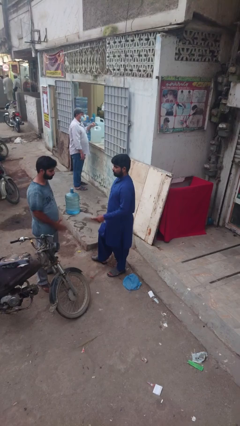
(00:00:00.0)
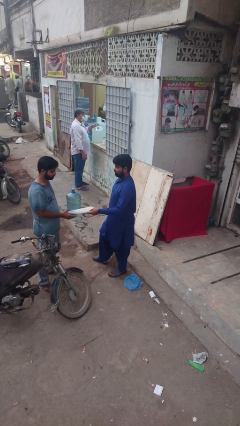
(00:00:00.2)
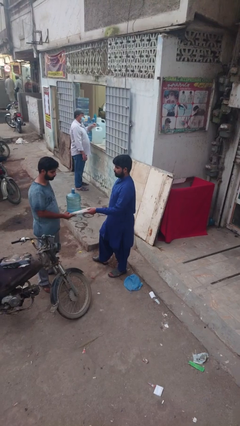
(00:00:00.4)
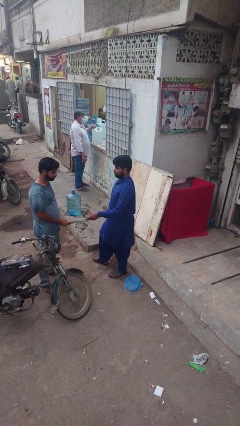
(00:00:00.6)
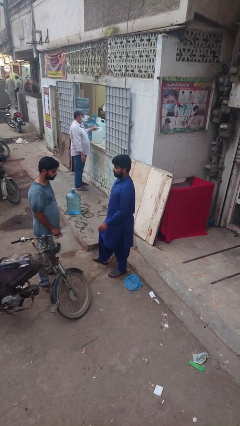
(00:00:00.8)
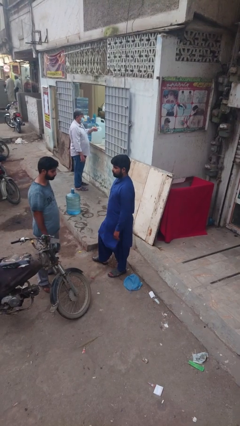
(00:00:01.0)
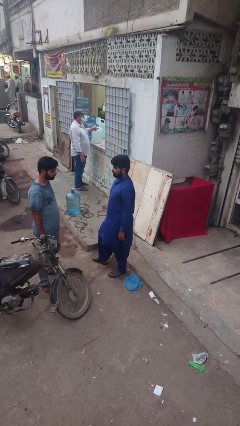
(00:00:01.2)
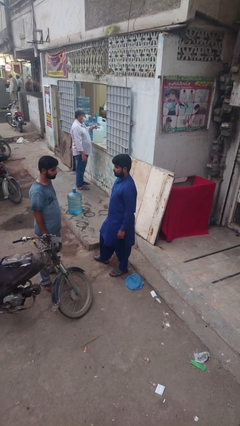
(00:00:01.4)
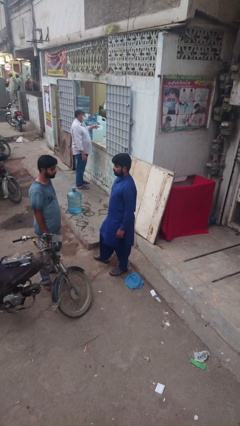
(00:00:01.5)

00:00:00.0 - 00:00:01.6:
person transfers object to person

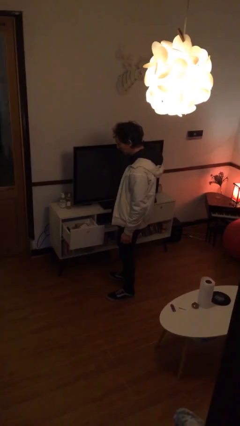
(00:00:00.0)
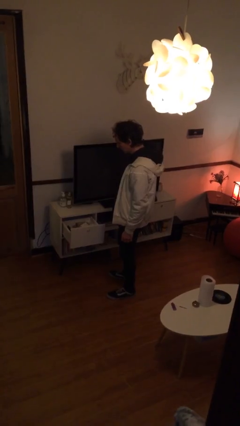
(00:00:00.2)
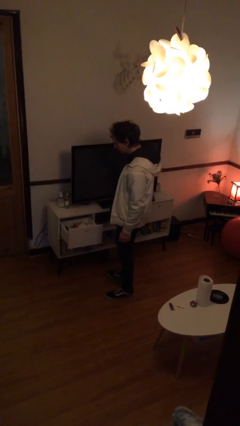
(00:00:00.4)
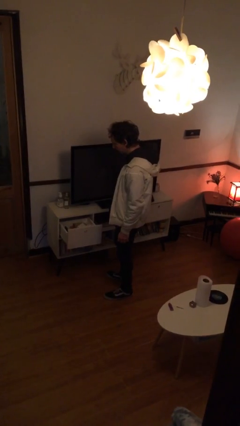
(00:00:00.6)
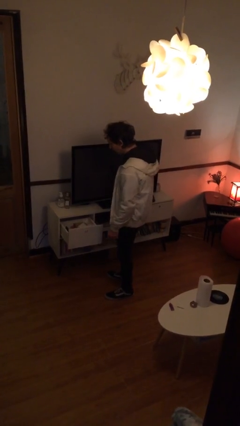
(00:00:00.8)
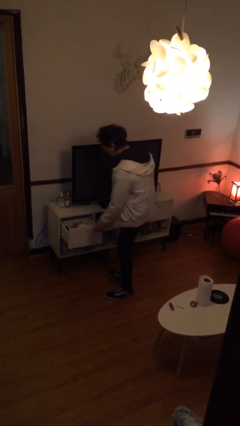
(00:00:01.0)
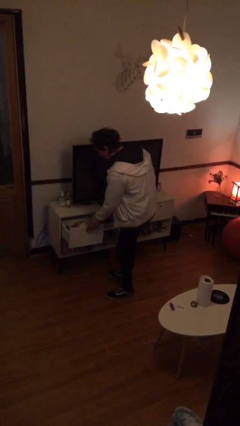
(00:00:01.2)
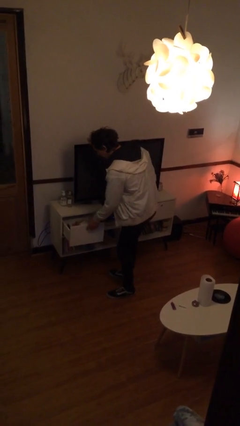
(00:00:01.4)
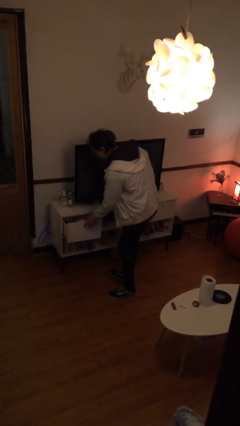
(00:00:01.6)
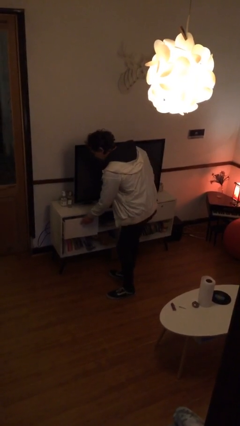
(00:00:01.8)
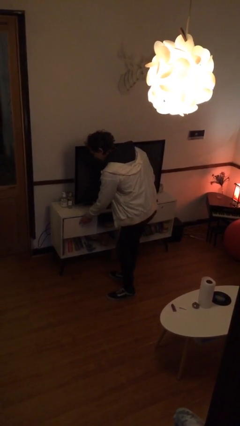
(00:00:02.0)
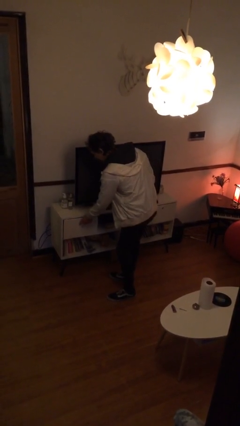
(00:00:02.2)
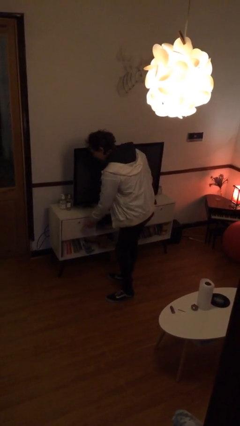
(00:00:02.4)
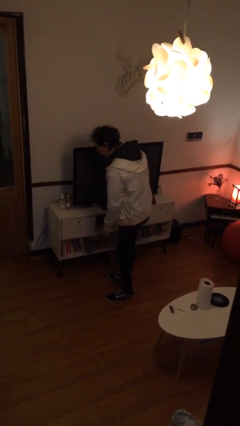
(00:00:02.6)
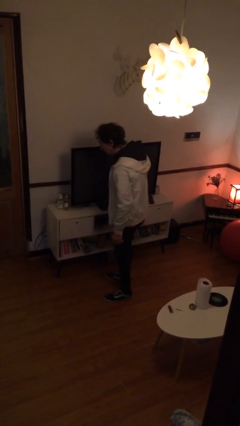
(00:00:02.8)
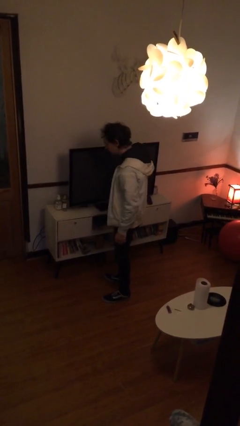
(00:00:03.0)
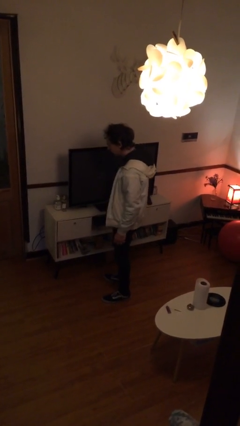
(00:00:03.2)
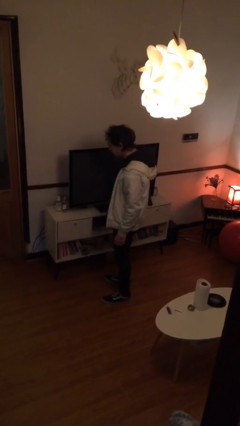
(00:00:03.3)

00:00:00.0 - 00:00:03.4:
person closes dresser drawer

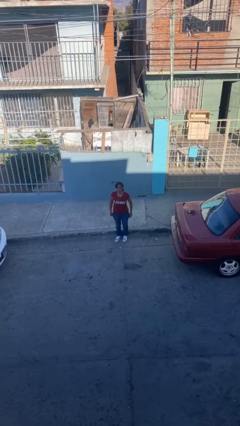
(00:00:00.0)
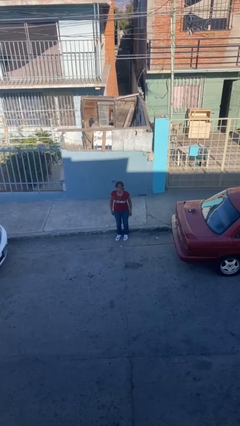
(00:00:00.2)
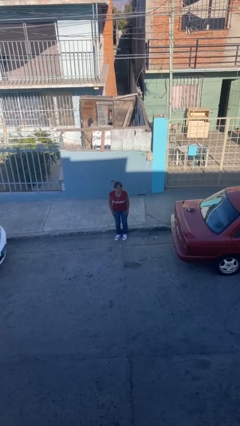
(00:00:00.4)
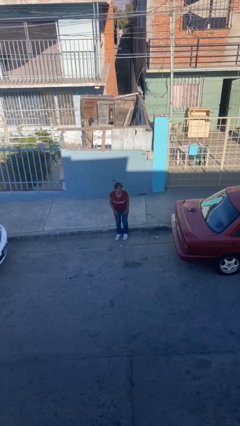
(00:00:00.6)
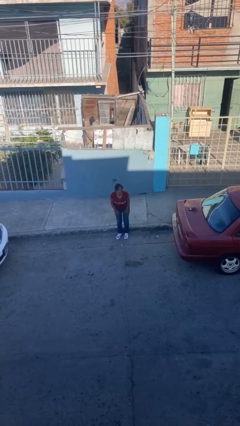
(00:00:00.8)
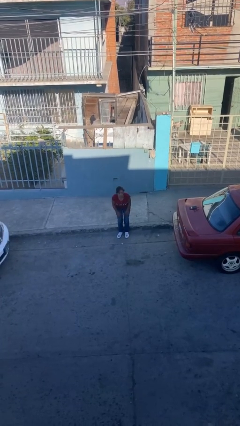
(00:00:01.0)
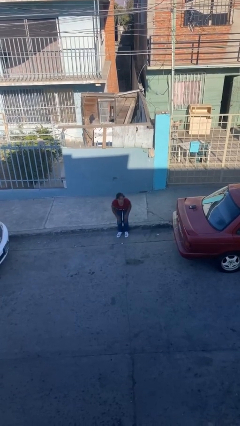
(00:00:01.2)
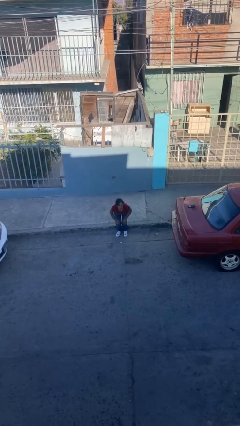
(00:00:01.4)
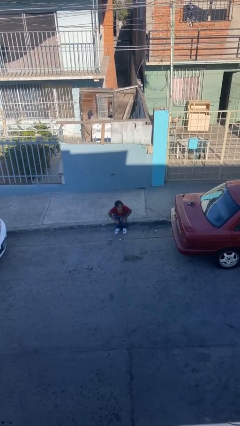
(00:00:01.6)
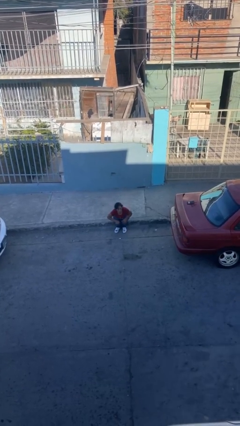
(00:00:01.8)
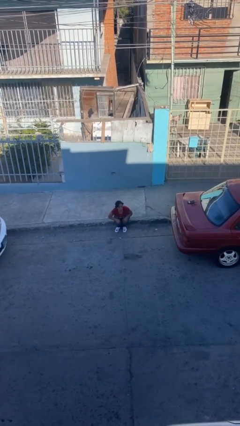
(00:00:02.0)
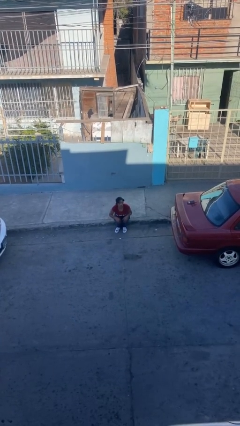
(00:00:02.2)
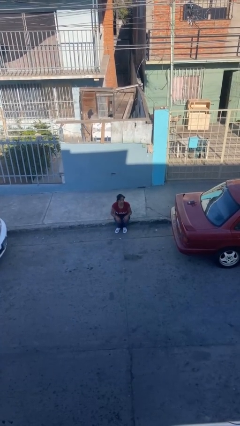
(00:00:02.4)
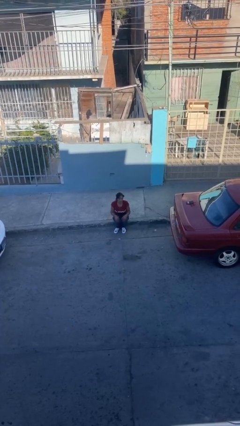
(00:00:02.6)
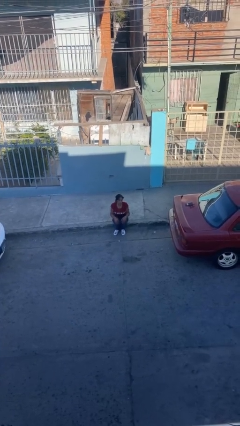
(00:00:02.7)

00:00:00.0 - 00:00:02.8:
person sits down

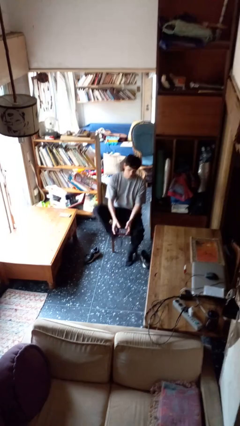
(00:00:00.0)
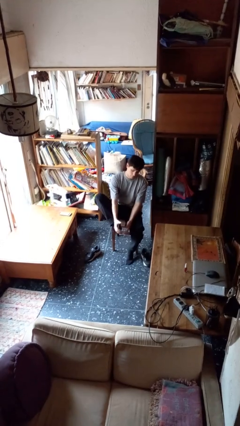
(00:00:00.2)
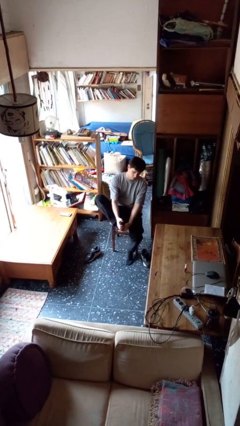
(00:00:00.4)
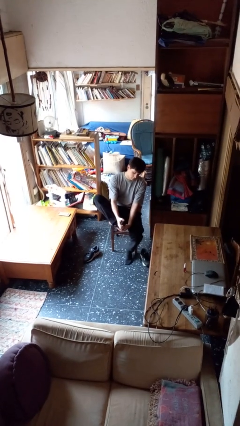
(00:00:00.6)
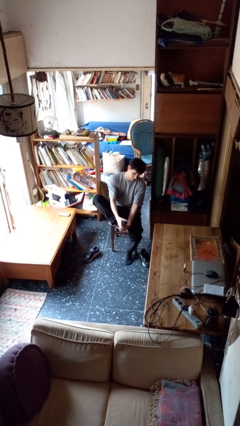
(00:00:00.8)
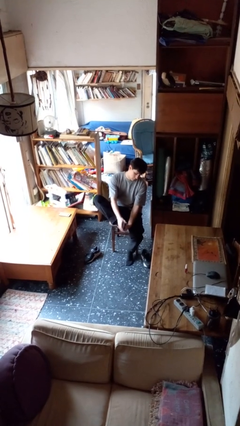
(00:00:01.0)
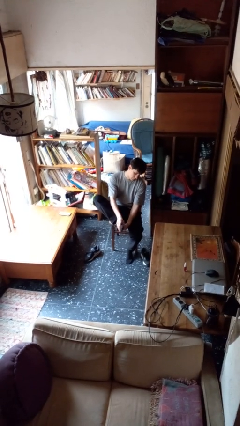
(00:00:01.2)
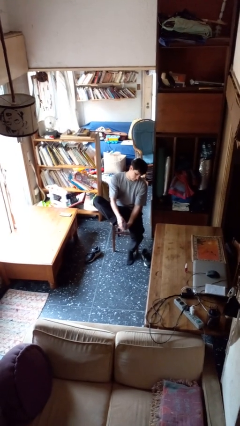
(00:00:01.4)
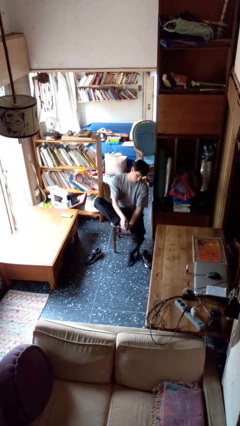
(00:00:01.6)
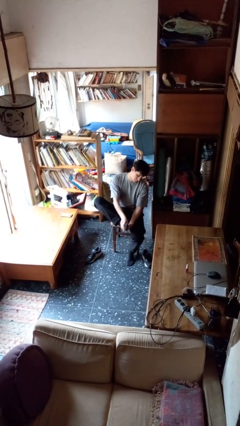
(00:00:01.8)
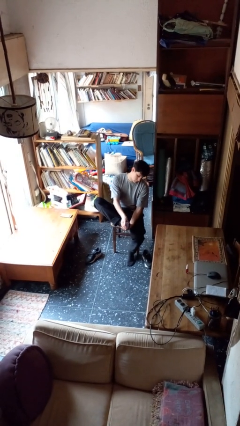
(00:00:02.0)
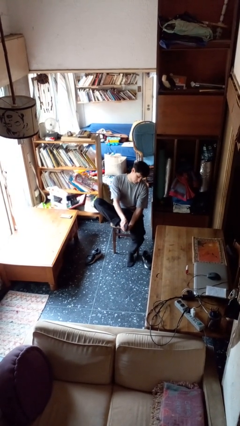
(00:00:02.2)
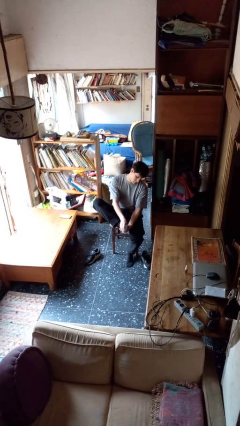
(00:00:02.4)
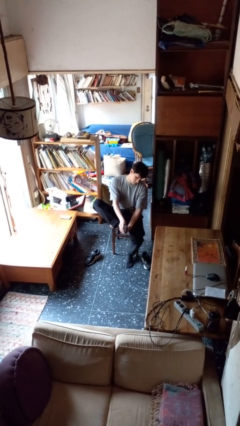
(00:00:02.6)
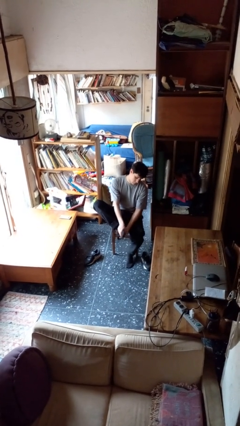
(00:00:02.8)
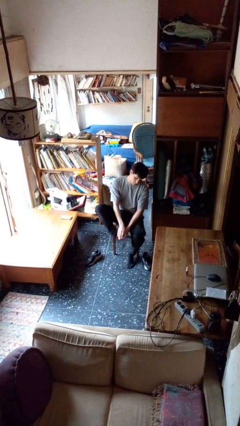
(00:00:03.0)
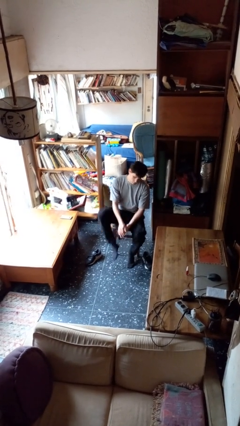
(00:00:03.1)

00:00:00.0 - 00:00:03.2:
person rubs foot

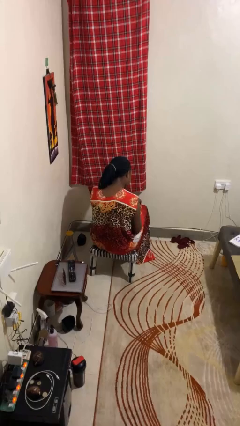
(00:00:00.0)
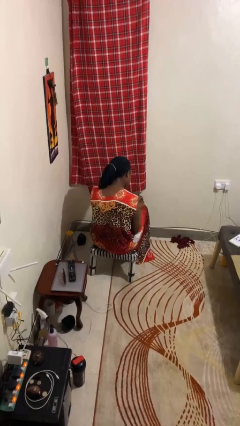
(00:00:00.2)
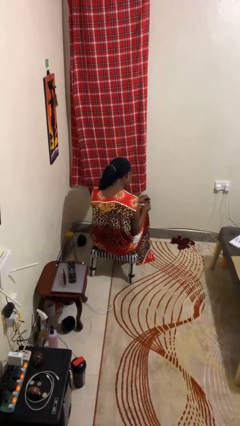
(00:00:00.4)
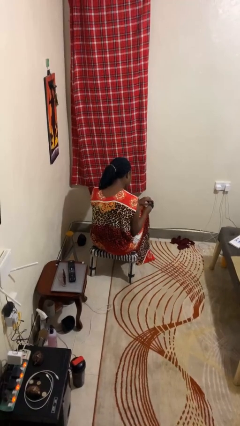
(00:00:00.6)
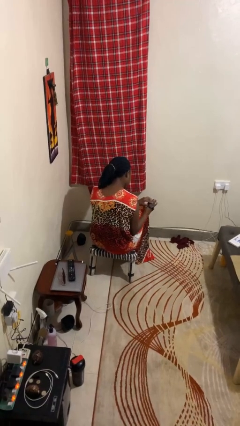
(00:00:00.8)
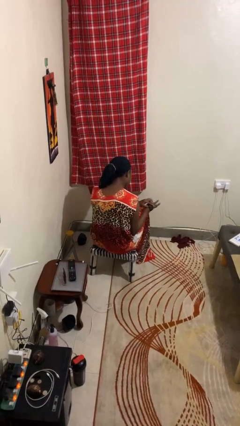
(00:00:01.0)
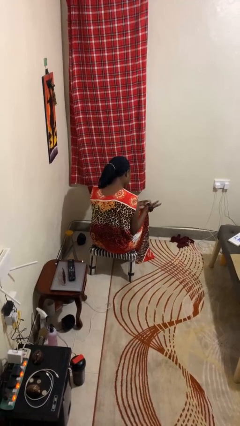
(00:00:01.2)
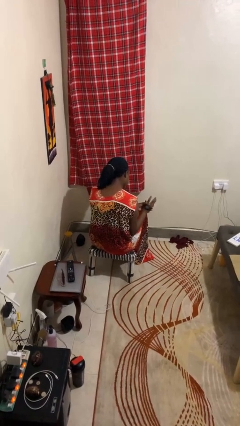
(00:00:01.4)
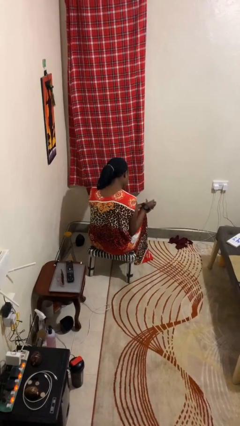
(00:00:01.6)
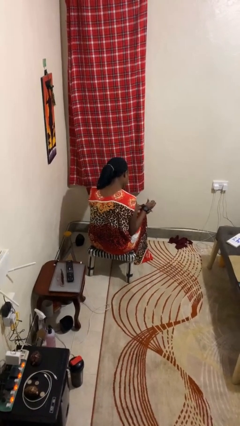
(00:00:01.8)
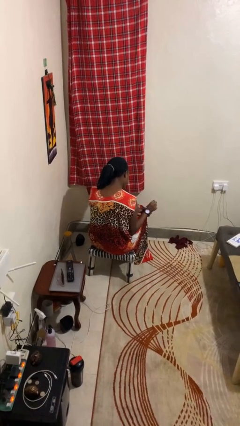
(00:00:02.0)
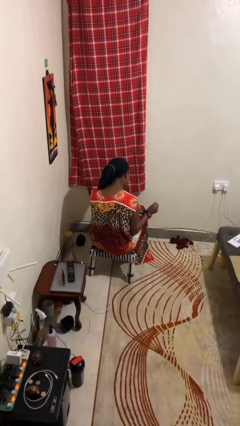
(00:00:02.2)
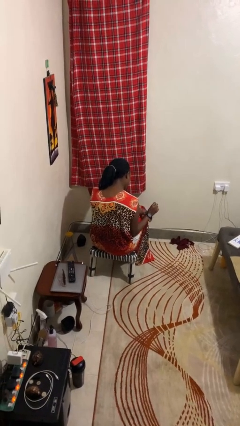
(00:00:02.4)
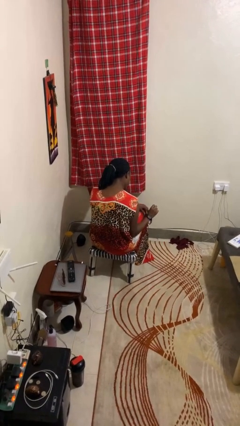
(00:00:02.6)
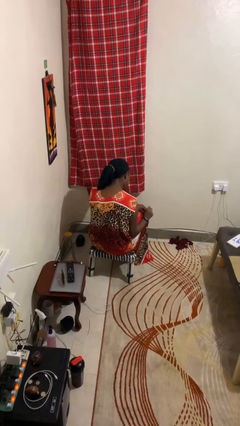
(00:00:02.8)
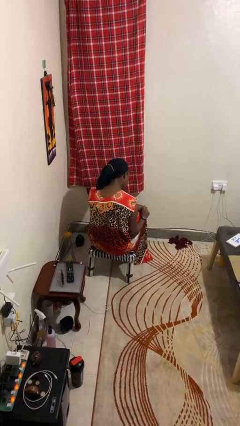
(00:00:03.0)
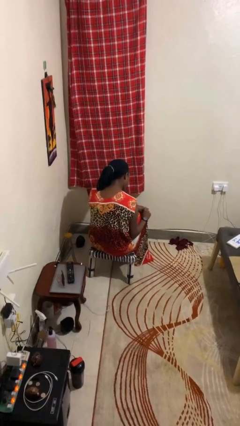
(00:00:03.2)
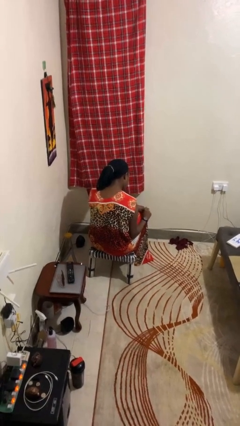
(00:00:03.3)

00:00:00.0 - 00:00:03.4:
person puts on wristwatch

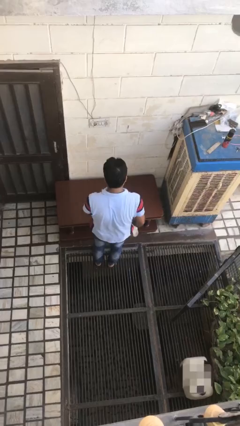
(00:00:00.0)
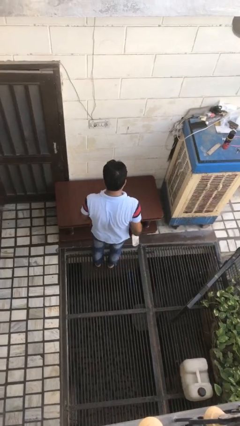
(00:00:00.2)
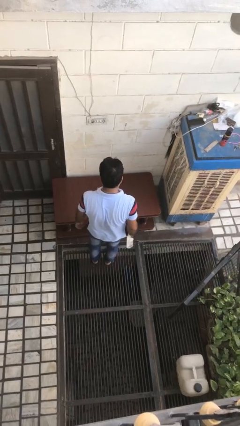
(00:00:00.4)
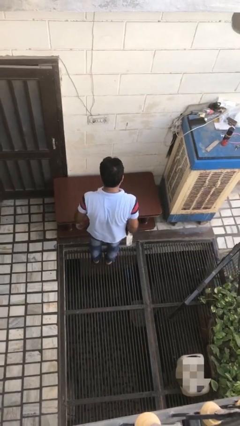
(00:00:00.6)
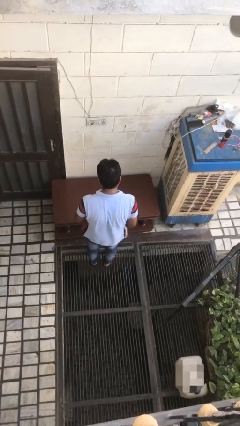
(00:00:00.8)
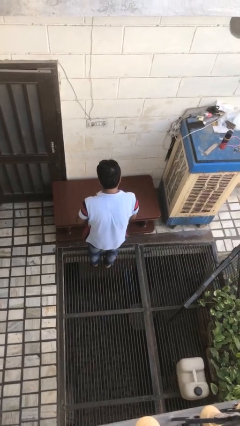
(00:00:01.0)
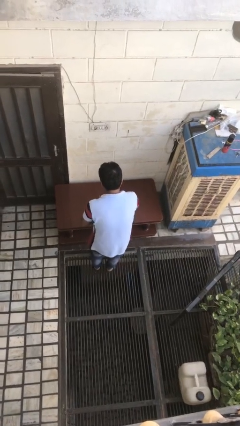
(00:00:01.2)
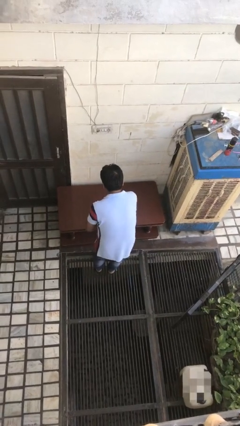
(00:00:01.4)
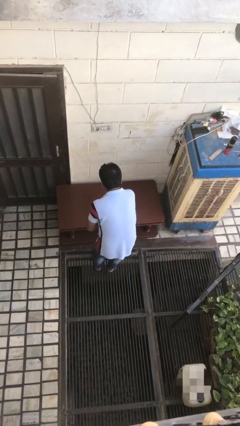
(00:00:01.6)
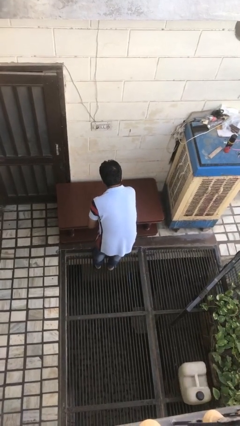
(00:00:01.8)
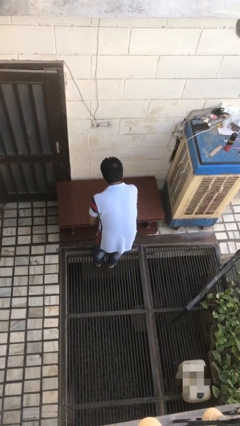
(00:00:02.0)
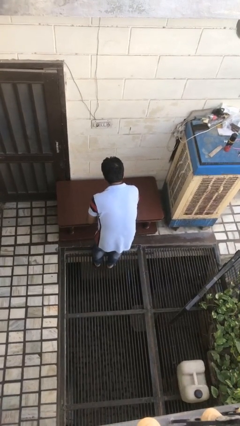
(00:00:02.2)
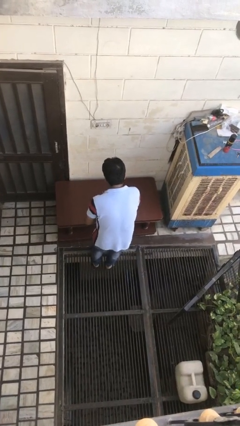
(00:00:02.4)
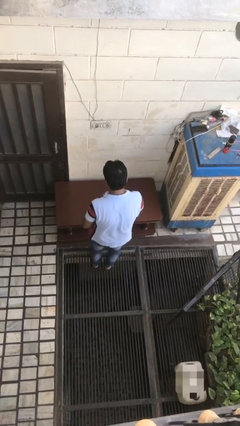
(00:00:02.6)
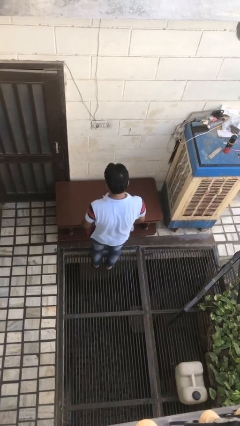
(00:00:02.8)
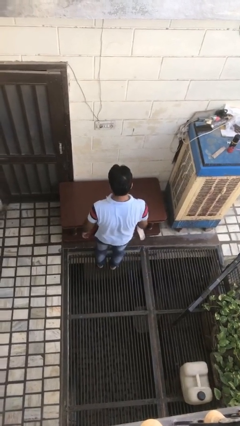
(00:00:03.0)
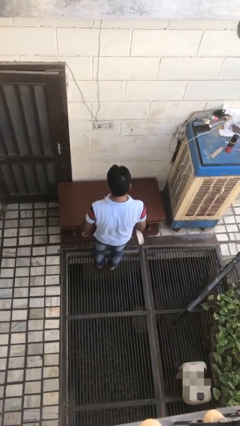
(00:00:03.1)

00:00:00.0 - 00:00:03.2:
person sprays from bottle
